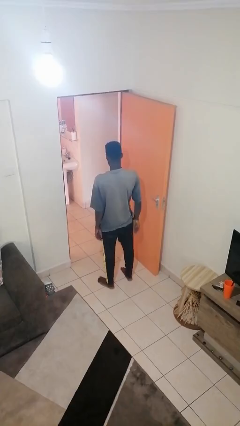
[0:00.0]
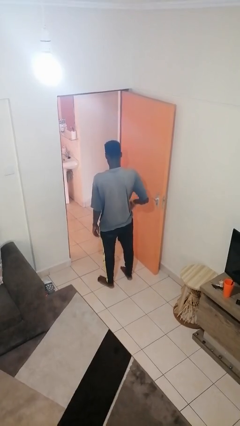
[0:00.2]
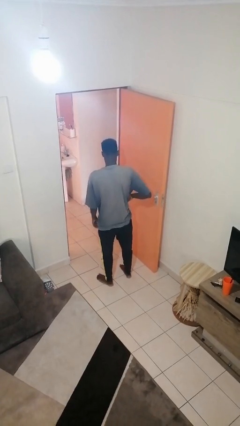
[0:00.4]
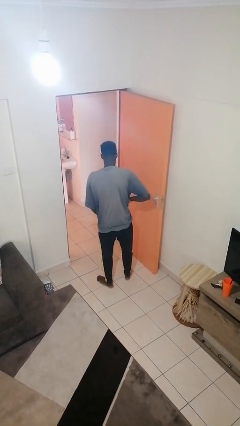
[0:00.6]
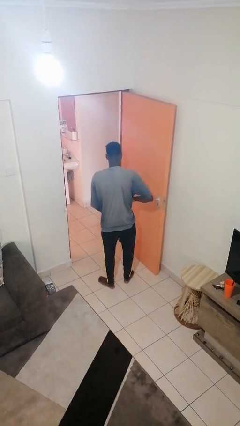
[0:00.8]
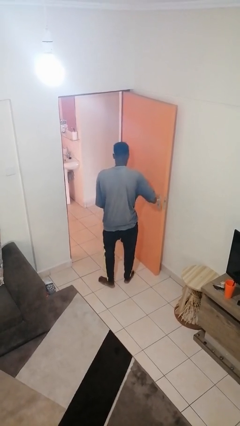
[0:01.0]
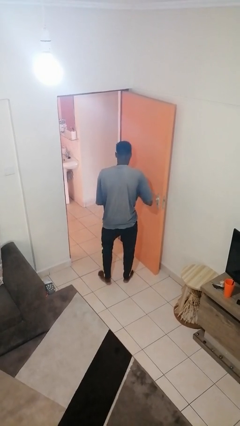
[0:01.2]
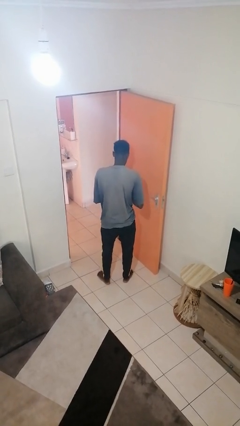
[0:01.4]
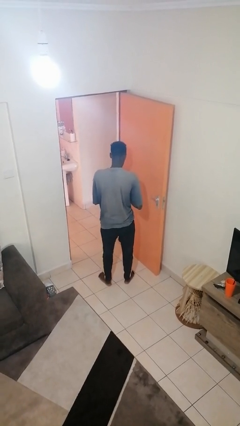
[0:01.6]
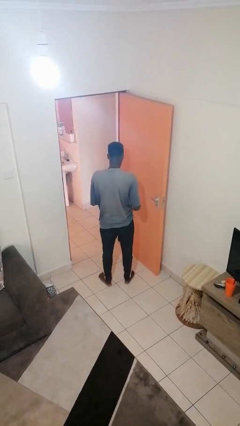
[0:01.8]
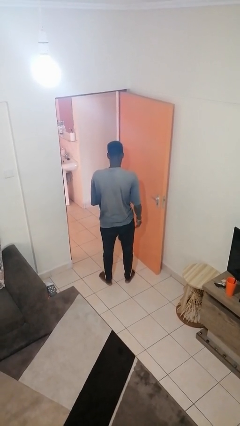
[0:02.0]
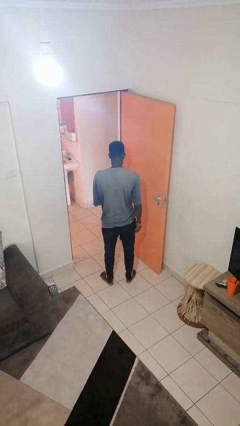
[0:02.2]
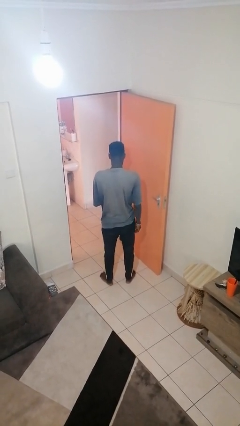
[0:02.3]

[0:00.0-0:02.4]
person takes phone from pocket

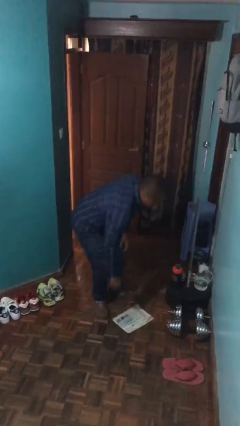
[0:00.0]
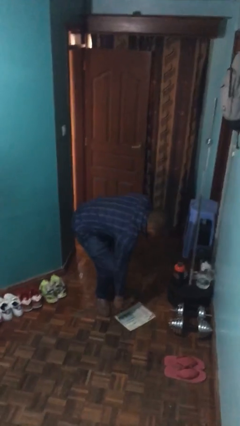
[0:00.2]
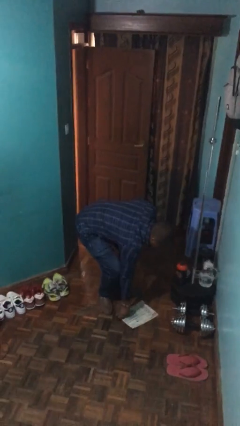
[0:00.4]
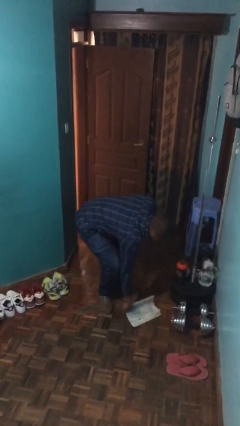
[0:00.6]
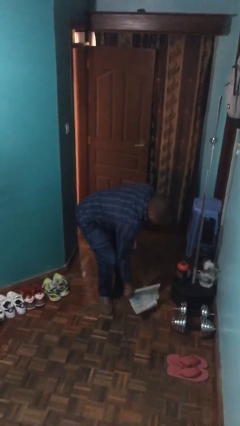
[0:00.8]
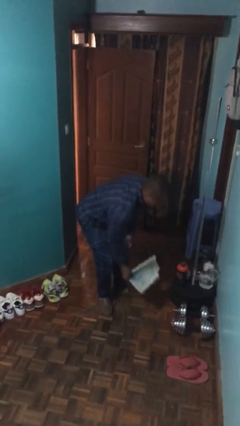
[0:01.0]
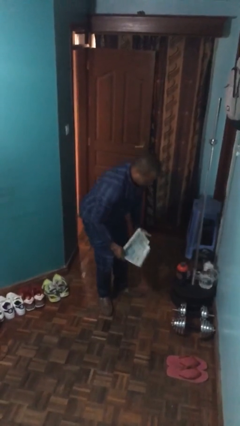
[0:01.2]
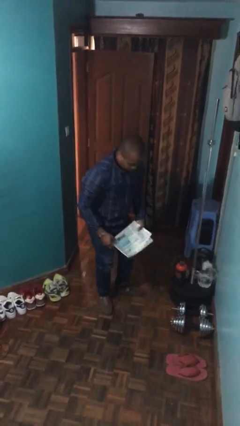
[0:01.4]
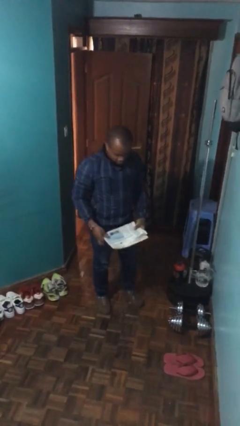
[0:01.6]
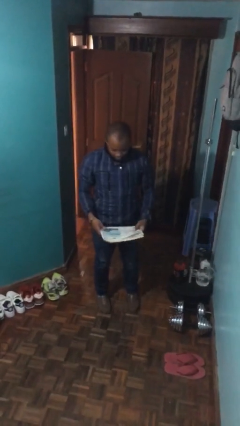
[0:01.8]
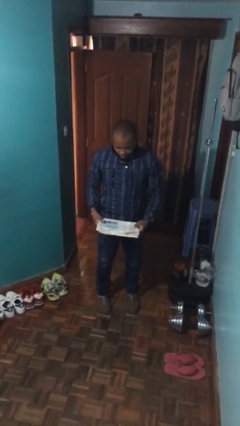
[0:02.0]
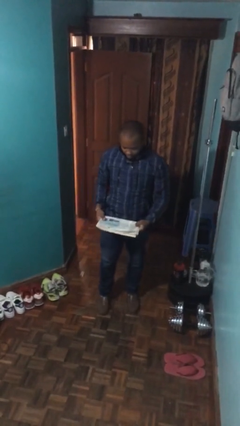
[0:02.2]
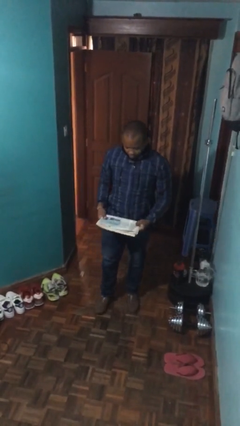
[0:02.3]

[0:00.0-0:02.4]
person picks up object from floor

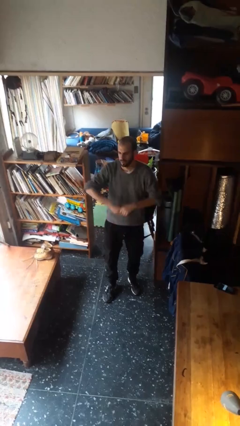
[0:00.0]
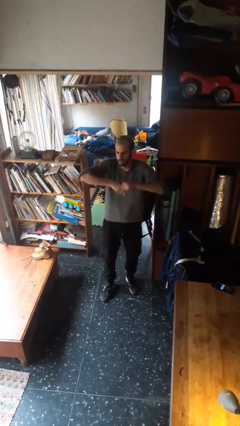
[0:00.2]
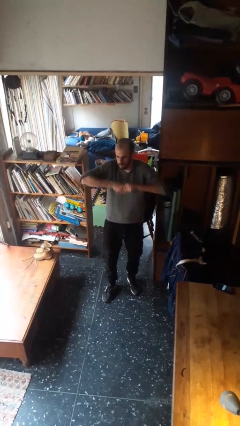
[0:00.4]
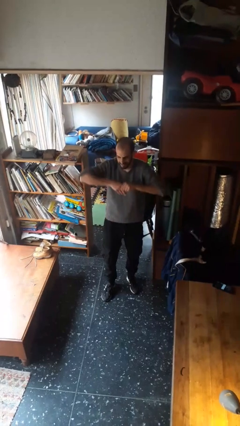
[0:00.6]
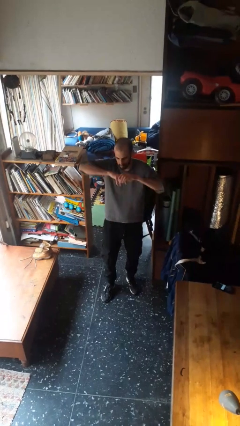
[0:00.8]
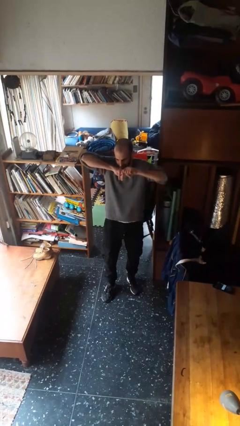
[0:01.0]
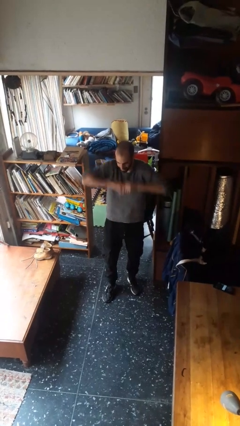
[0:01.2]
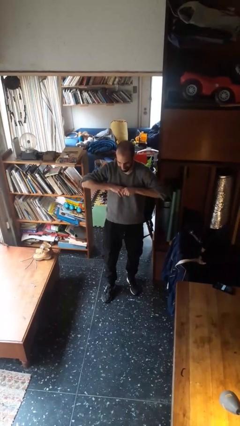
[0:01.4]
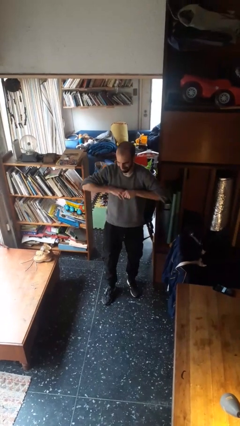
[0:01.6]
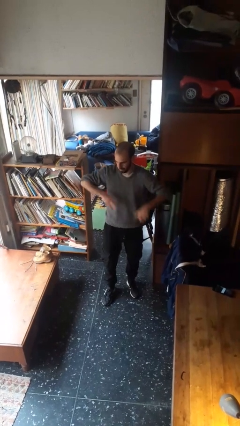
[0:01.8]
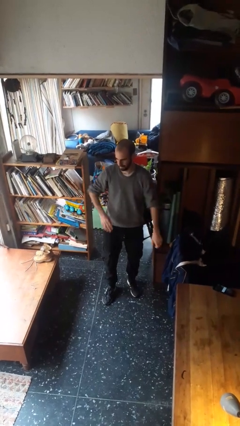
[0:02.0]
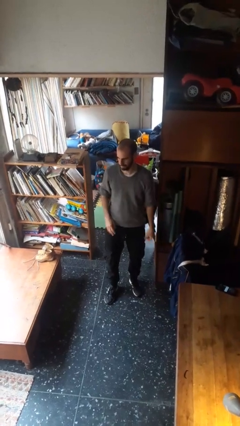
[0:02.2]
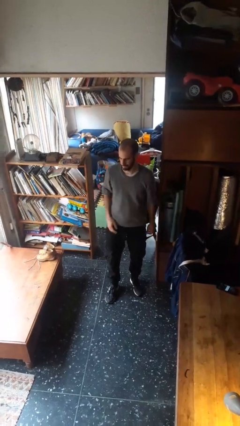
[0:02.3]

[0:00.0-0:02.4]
person cracks knuckles

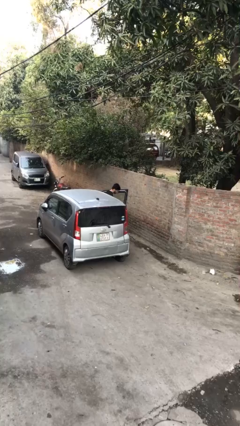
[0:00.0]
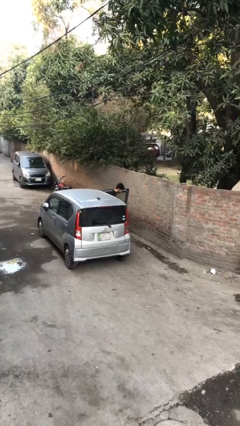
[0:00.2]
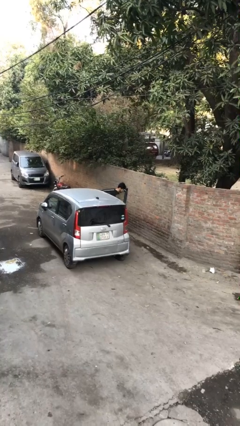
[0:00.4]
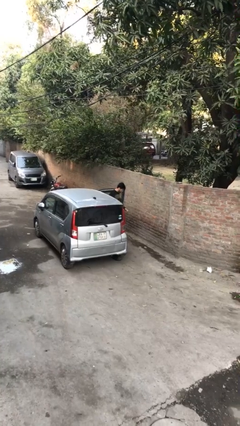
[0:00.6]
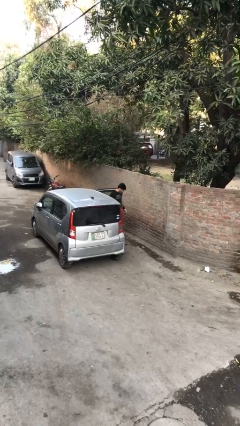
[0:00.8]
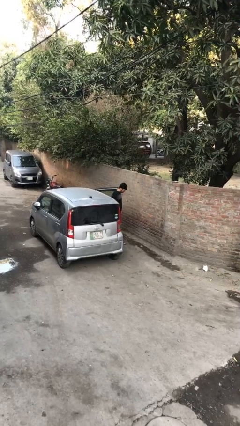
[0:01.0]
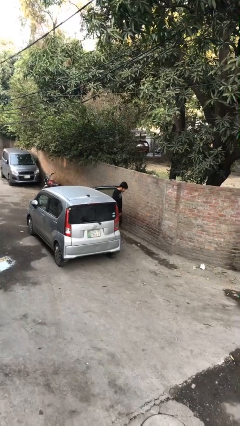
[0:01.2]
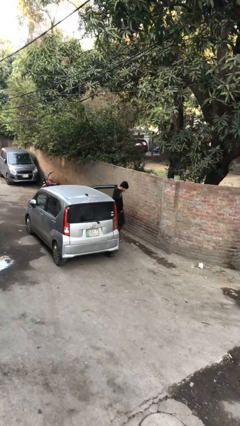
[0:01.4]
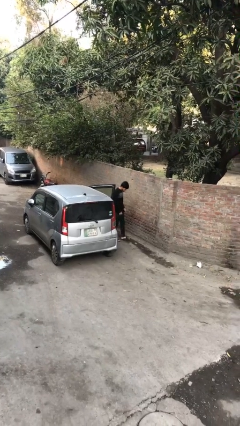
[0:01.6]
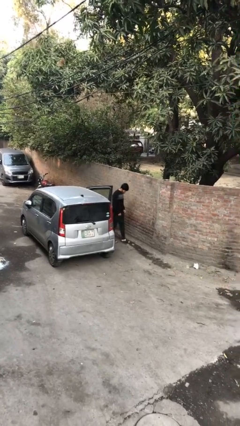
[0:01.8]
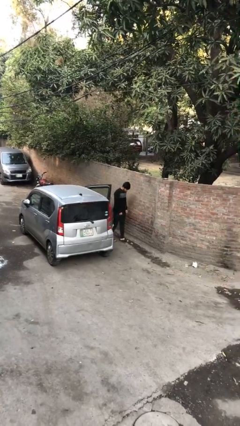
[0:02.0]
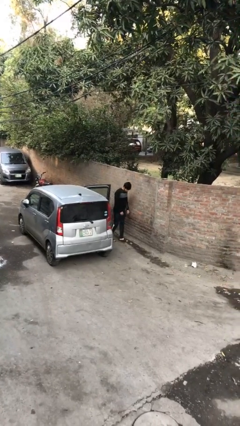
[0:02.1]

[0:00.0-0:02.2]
person exits car

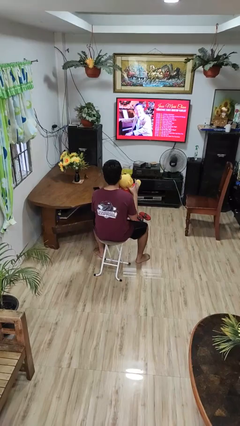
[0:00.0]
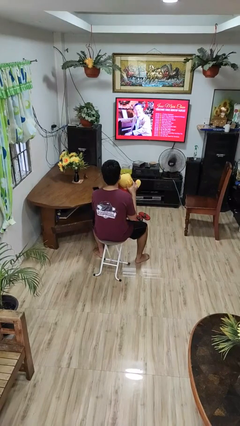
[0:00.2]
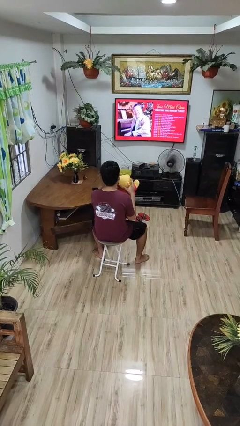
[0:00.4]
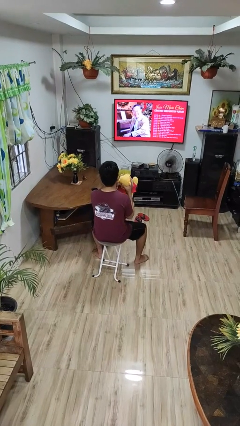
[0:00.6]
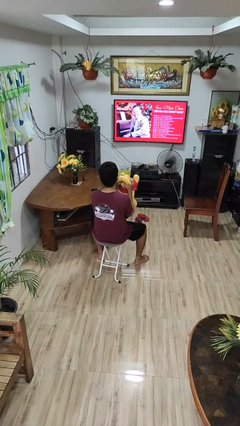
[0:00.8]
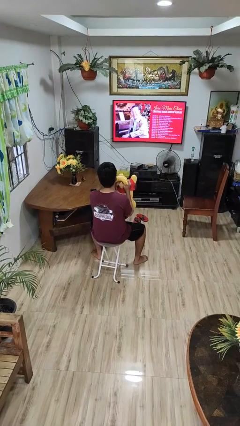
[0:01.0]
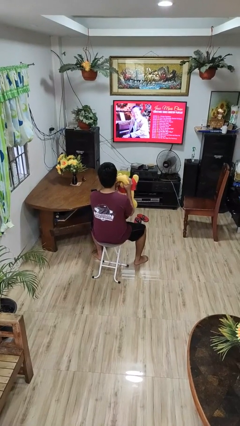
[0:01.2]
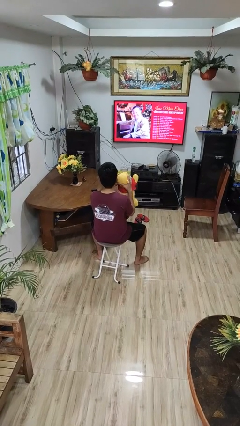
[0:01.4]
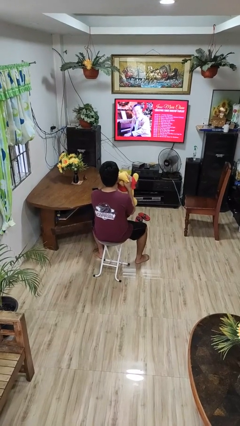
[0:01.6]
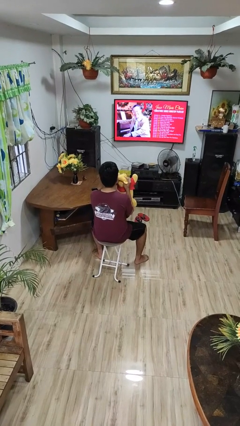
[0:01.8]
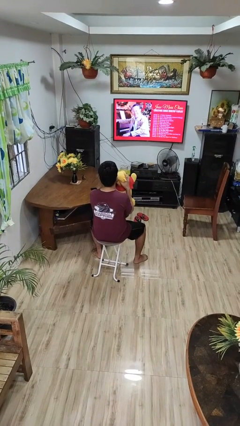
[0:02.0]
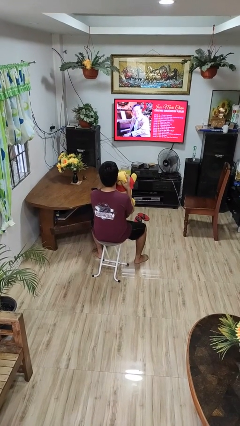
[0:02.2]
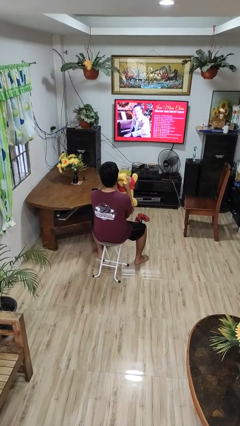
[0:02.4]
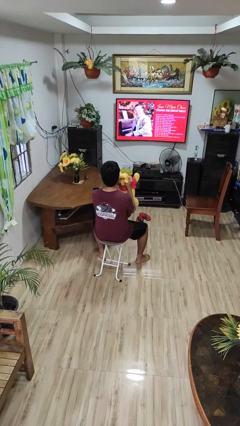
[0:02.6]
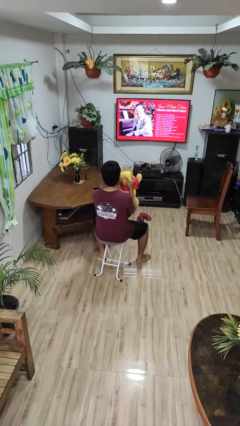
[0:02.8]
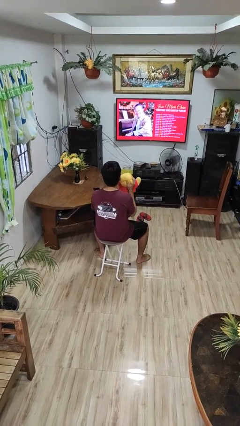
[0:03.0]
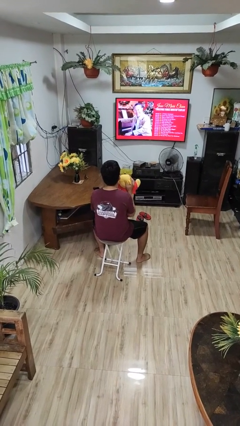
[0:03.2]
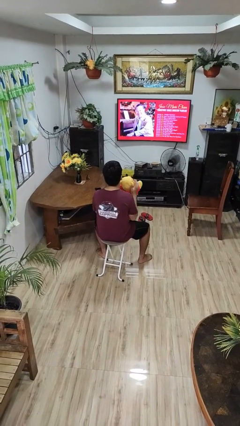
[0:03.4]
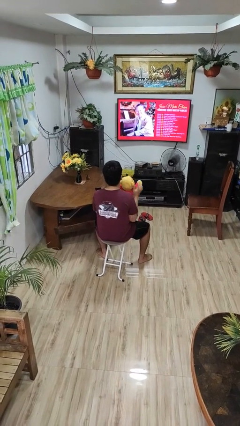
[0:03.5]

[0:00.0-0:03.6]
person squeezes object

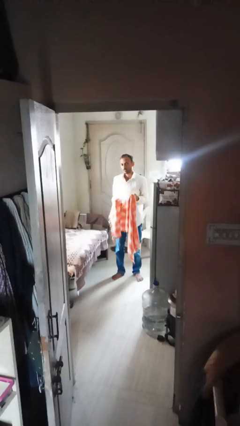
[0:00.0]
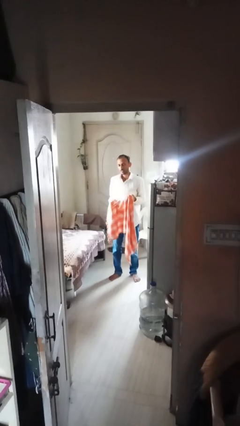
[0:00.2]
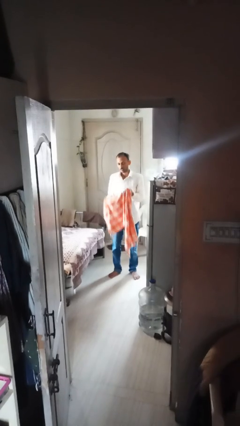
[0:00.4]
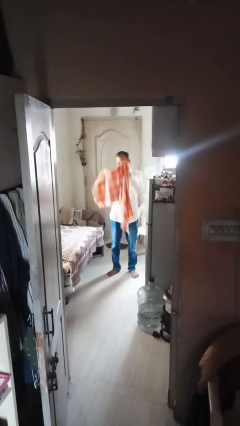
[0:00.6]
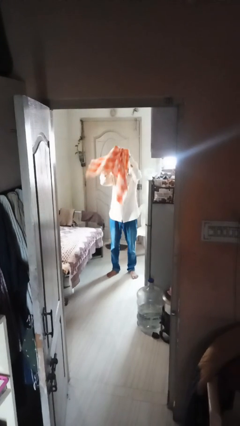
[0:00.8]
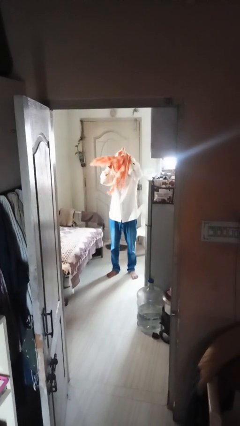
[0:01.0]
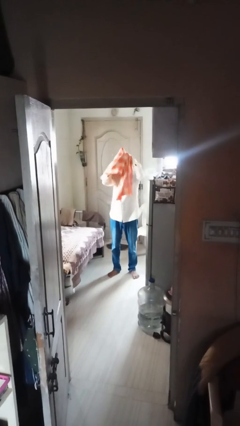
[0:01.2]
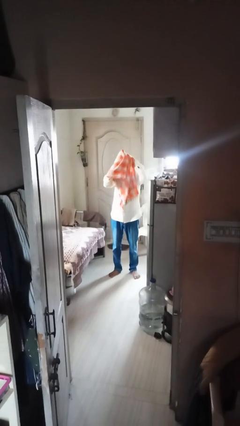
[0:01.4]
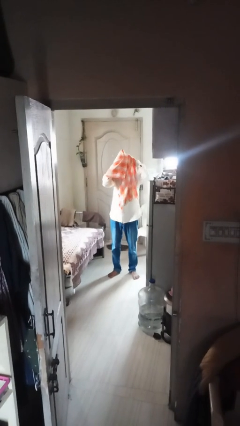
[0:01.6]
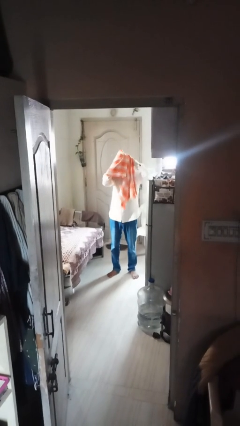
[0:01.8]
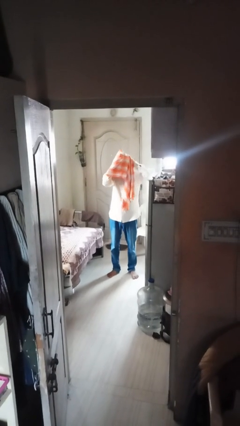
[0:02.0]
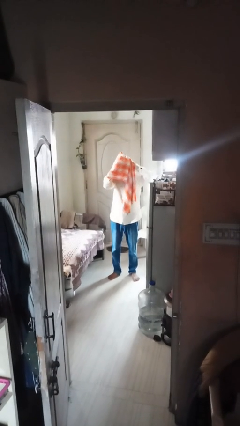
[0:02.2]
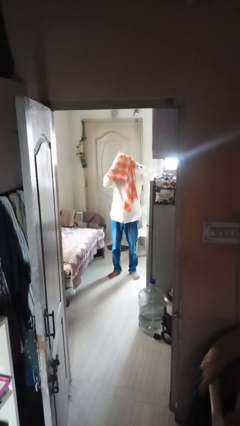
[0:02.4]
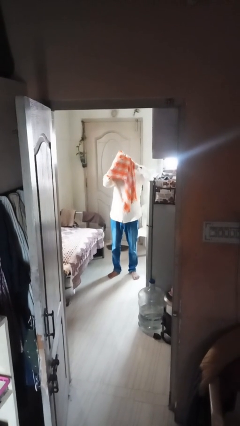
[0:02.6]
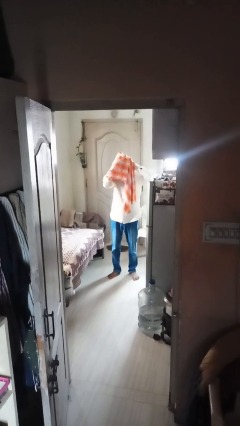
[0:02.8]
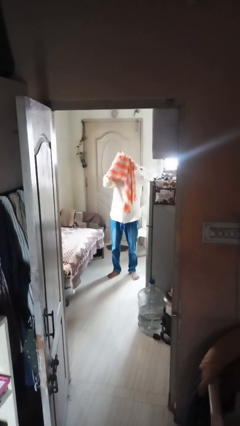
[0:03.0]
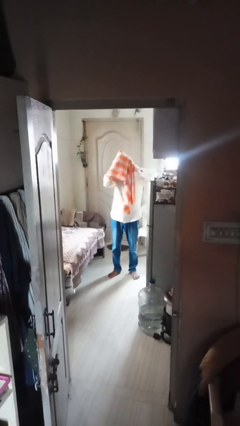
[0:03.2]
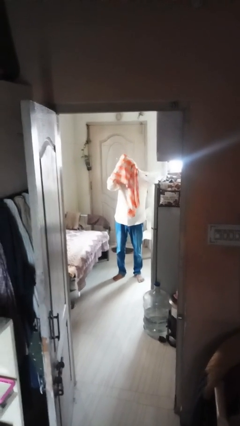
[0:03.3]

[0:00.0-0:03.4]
person dries hair with towel

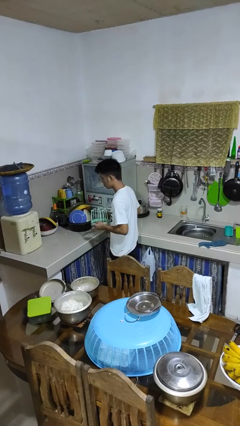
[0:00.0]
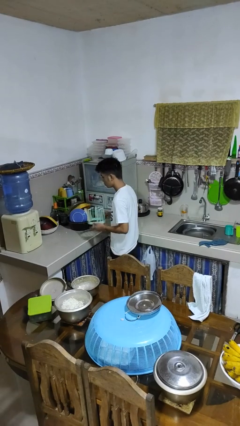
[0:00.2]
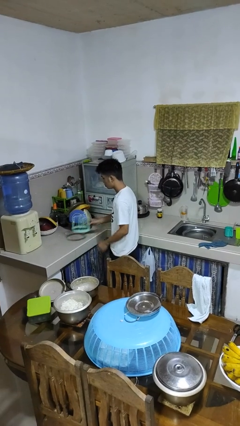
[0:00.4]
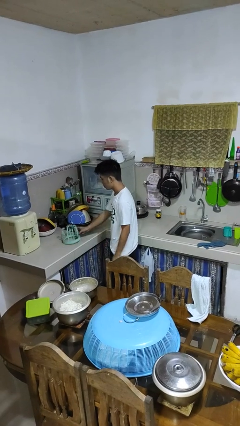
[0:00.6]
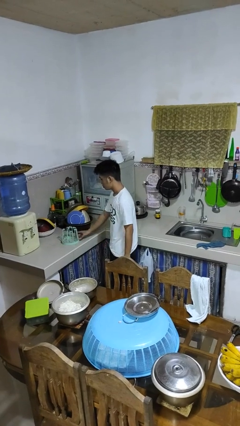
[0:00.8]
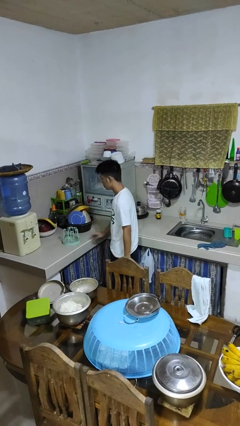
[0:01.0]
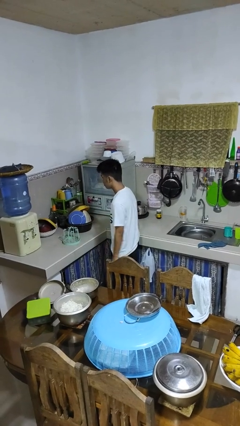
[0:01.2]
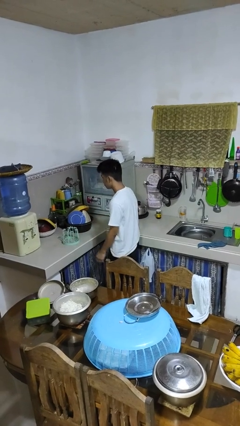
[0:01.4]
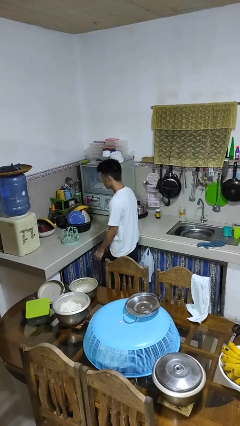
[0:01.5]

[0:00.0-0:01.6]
person puts down object on countertop
